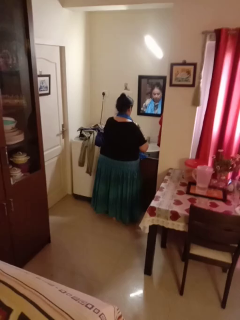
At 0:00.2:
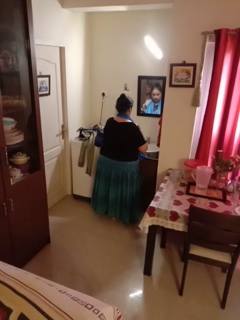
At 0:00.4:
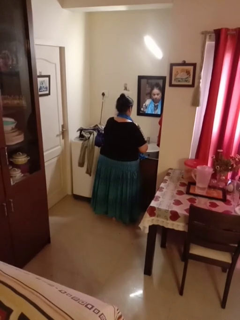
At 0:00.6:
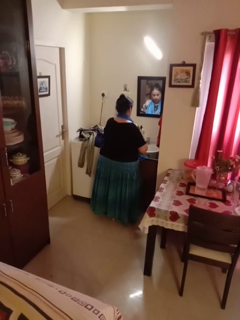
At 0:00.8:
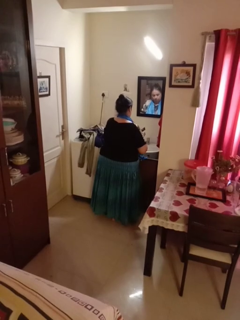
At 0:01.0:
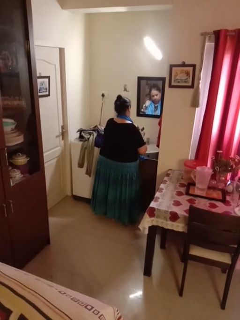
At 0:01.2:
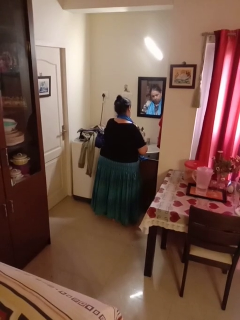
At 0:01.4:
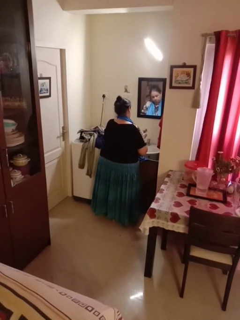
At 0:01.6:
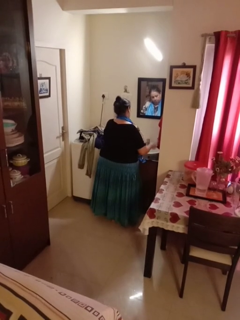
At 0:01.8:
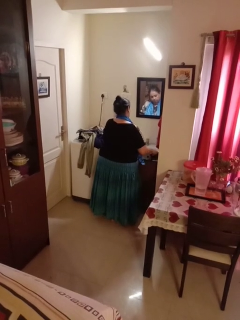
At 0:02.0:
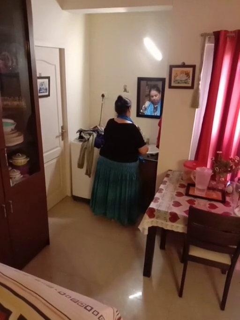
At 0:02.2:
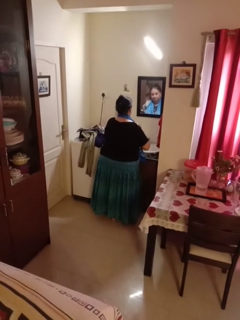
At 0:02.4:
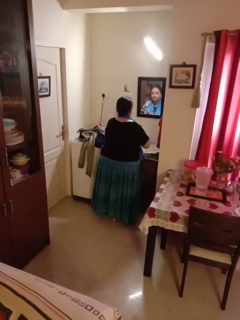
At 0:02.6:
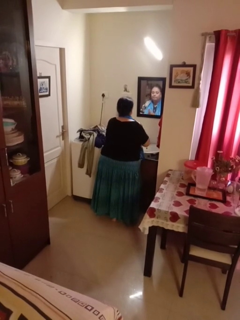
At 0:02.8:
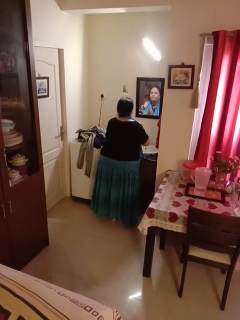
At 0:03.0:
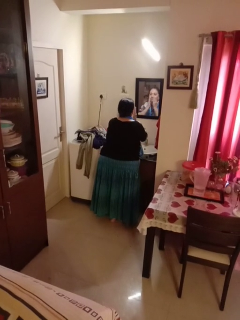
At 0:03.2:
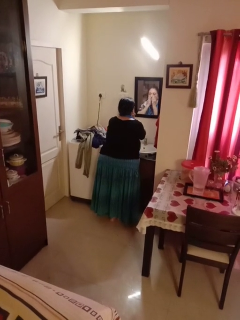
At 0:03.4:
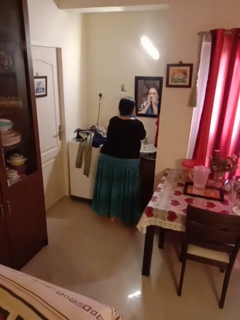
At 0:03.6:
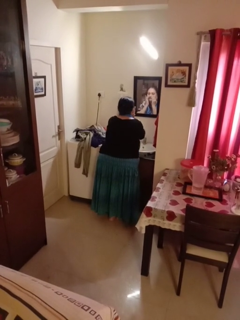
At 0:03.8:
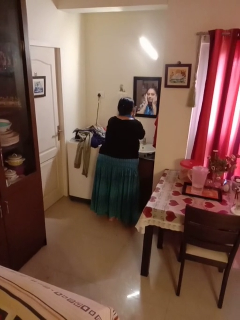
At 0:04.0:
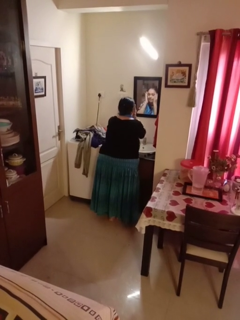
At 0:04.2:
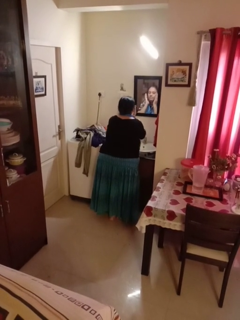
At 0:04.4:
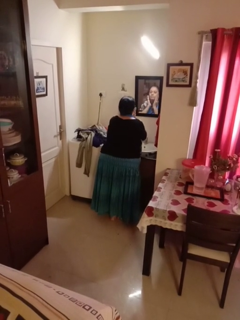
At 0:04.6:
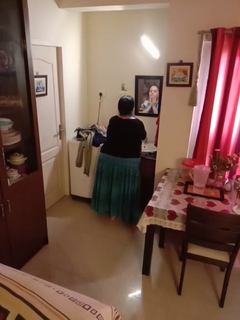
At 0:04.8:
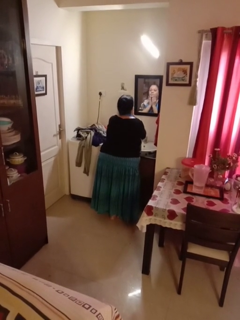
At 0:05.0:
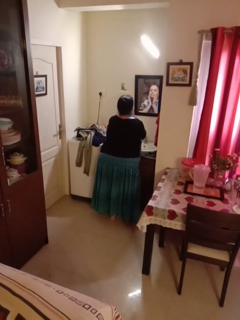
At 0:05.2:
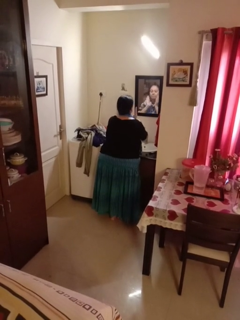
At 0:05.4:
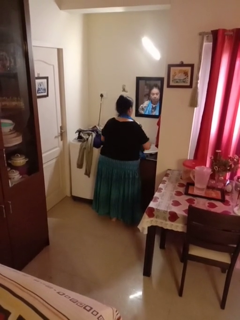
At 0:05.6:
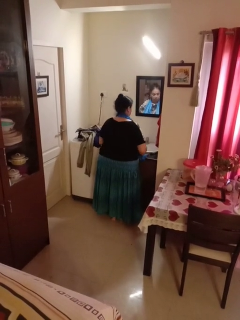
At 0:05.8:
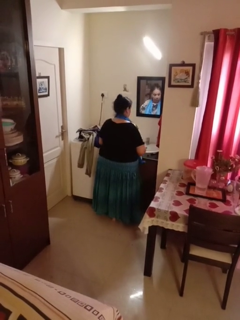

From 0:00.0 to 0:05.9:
person applies foundation makeup

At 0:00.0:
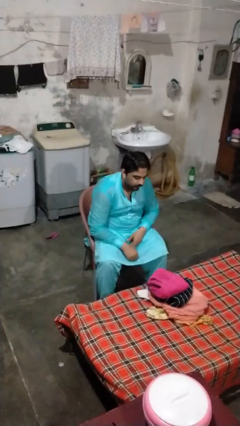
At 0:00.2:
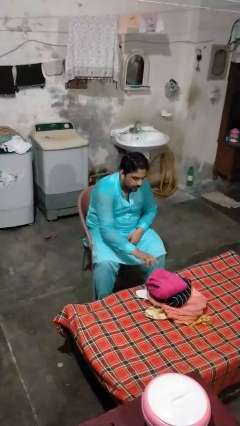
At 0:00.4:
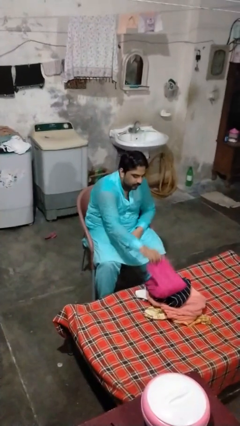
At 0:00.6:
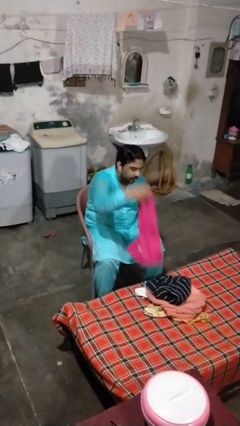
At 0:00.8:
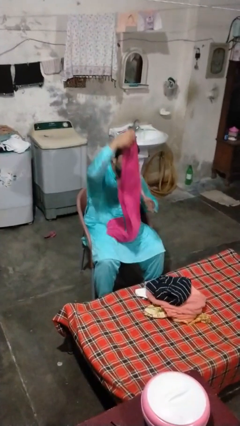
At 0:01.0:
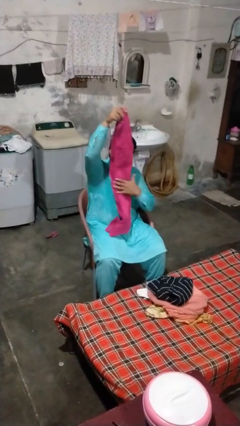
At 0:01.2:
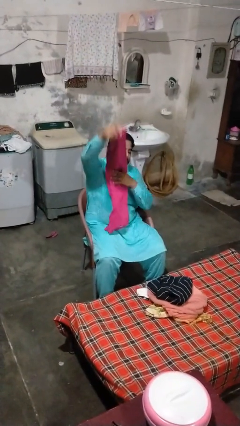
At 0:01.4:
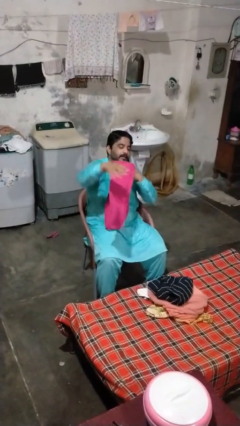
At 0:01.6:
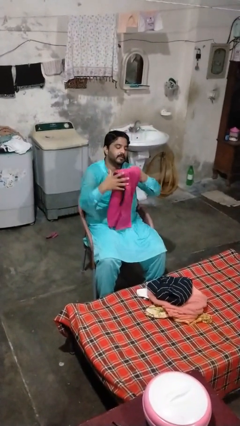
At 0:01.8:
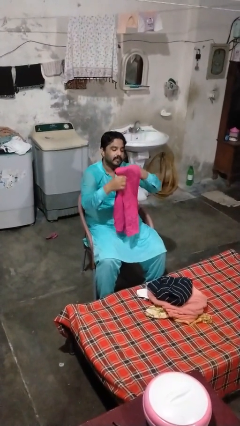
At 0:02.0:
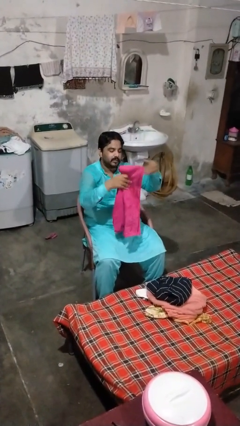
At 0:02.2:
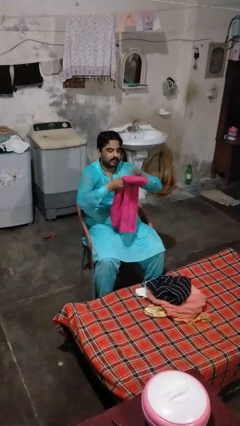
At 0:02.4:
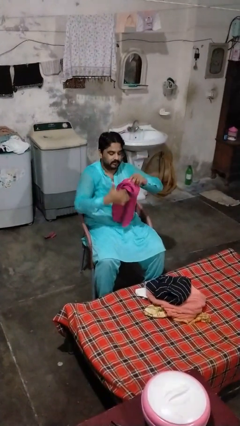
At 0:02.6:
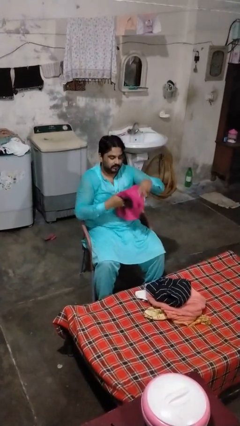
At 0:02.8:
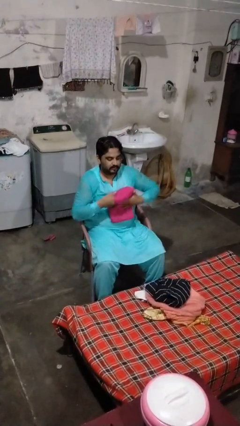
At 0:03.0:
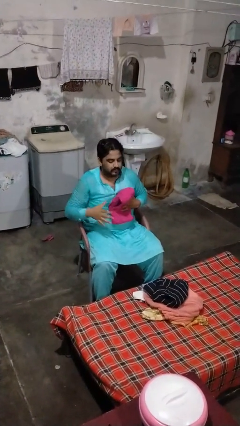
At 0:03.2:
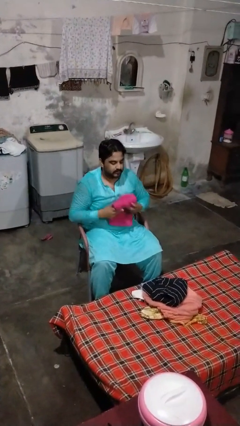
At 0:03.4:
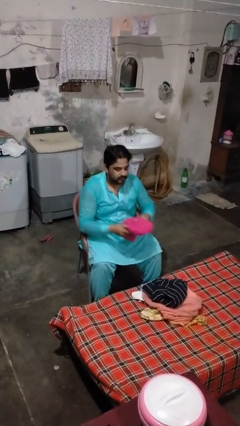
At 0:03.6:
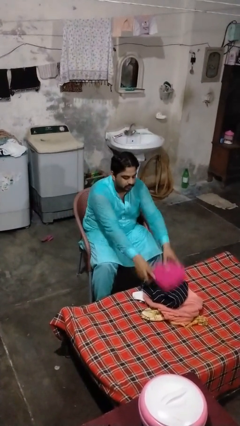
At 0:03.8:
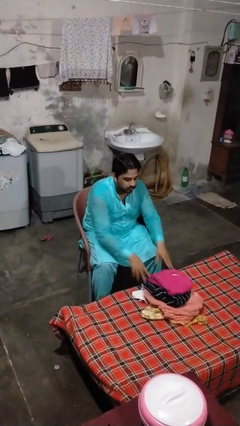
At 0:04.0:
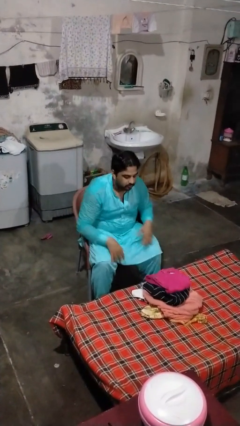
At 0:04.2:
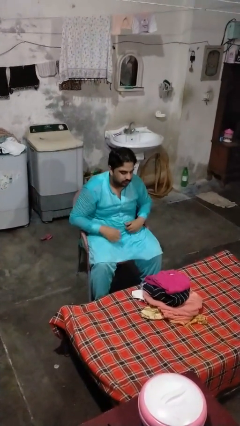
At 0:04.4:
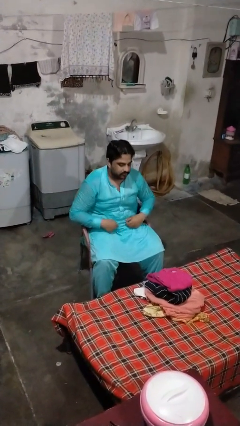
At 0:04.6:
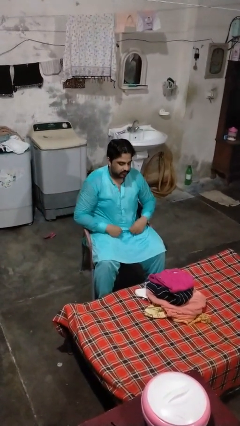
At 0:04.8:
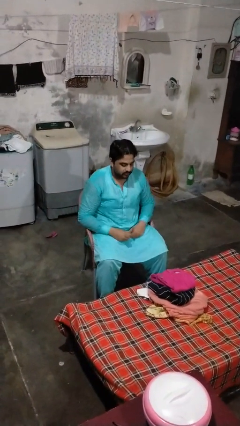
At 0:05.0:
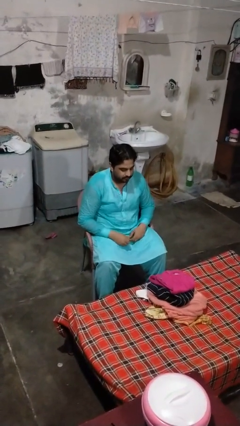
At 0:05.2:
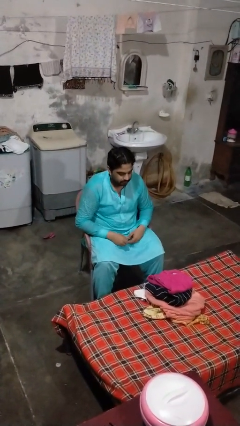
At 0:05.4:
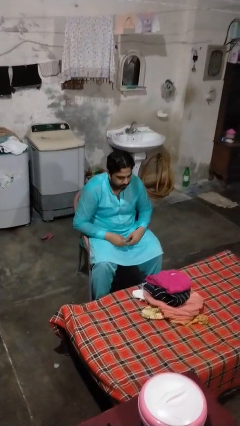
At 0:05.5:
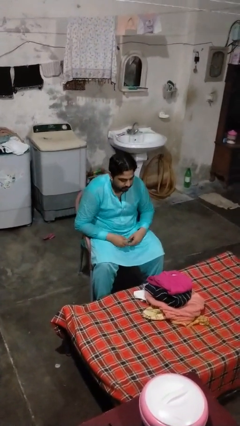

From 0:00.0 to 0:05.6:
person folds pants

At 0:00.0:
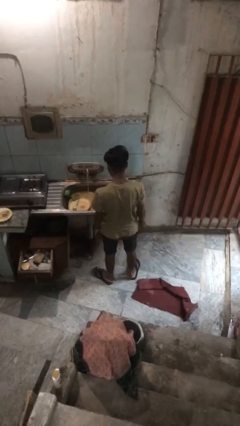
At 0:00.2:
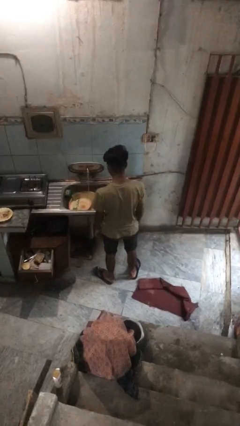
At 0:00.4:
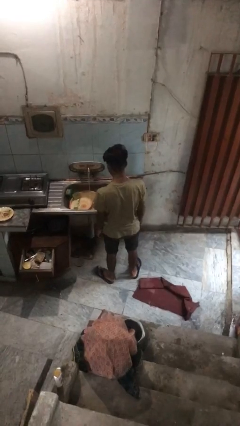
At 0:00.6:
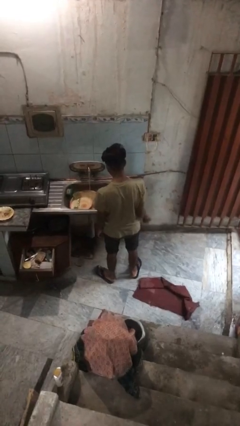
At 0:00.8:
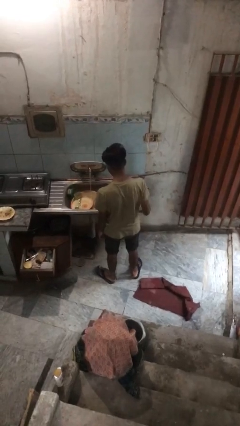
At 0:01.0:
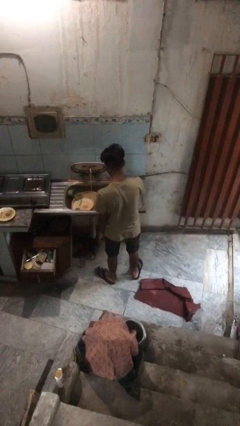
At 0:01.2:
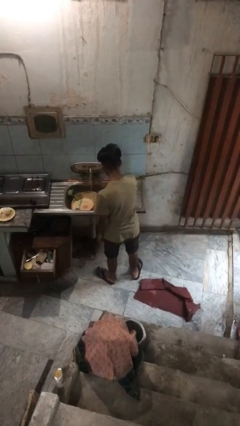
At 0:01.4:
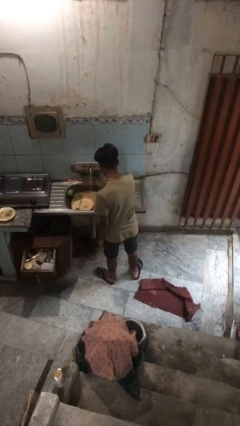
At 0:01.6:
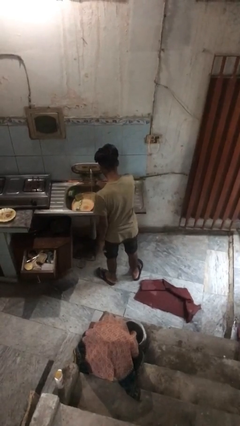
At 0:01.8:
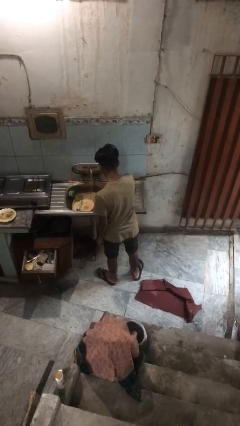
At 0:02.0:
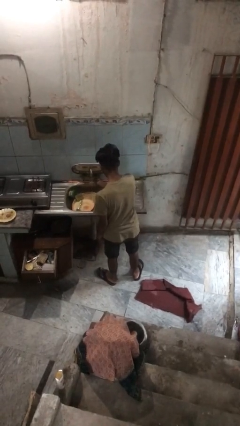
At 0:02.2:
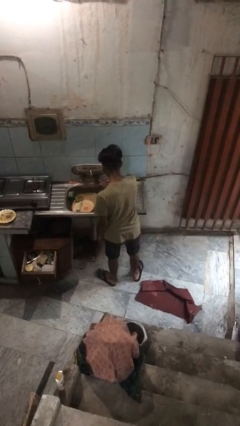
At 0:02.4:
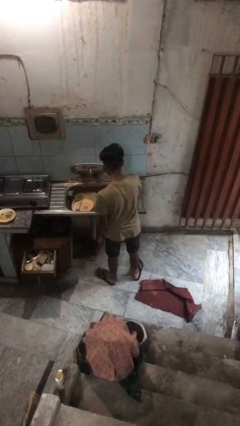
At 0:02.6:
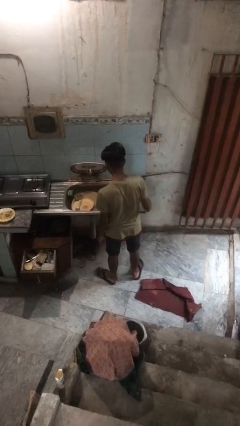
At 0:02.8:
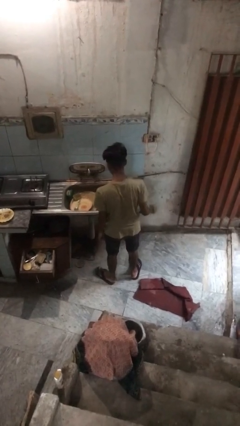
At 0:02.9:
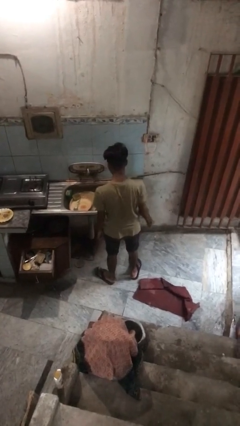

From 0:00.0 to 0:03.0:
person turns off faucet

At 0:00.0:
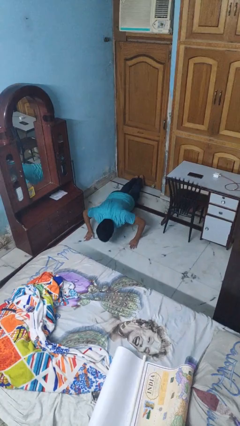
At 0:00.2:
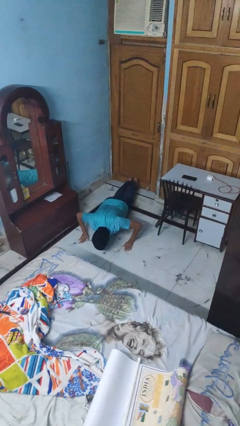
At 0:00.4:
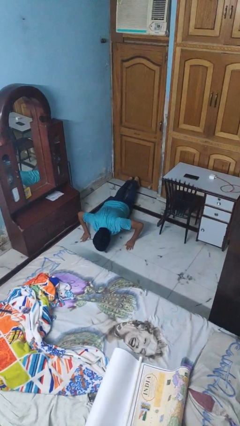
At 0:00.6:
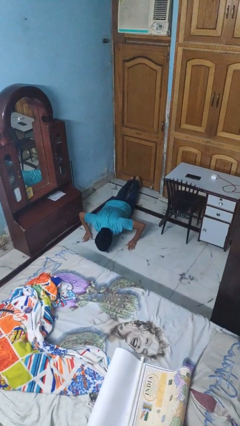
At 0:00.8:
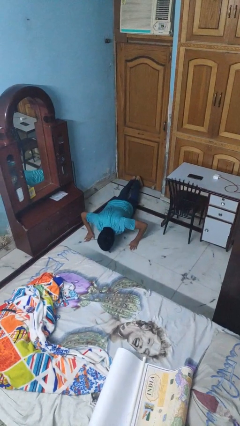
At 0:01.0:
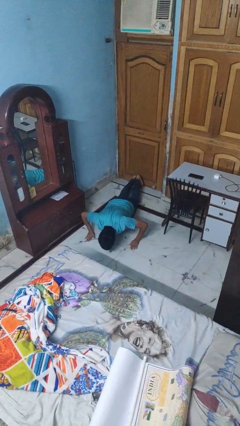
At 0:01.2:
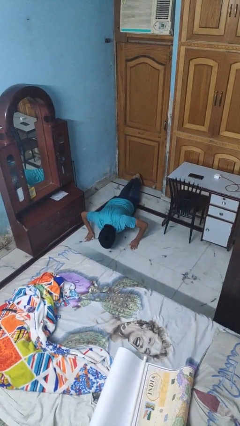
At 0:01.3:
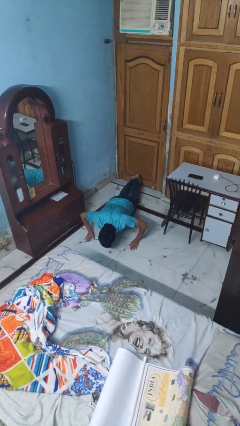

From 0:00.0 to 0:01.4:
person exercises with pushup

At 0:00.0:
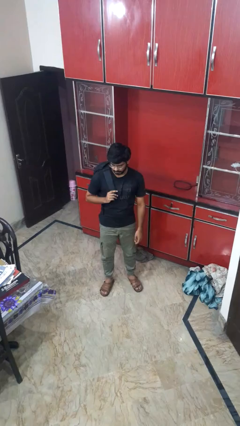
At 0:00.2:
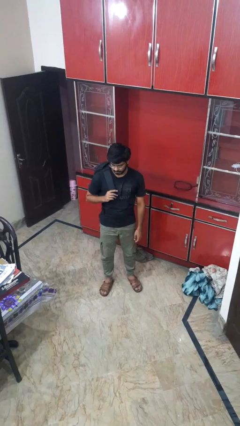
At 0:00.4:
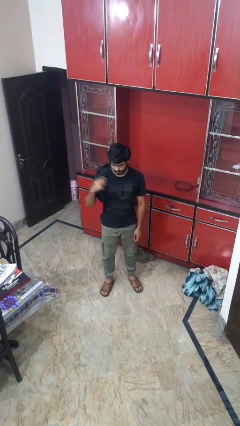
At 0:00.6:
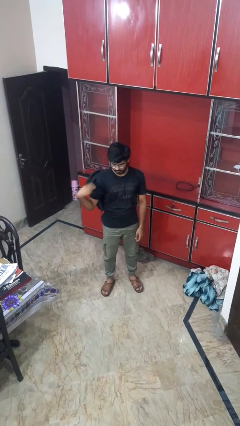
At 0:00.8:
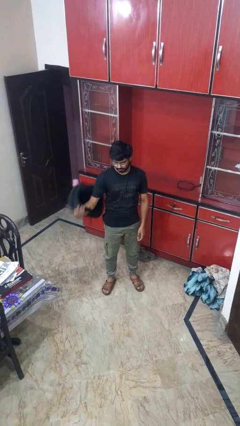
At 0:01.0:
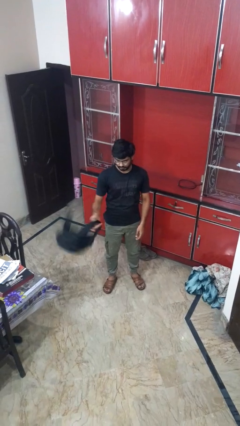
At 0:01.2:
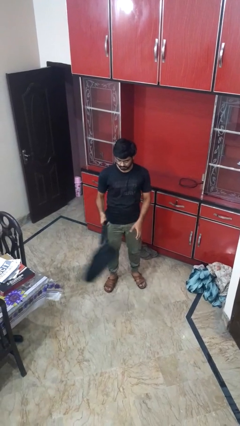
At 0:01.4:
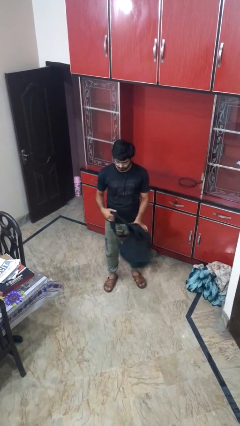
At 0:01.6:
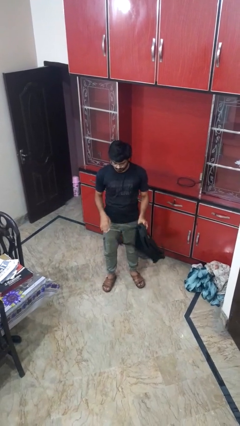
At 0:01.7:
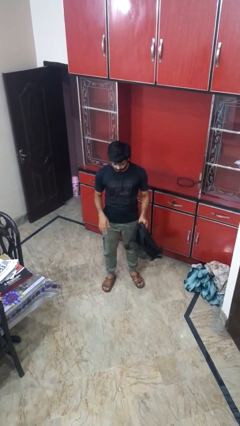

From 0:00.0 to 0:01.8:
person takes off backpack

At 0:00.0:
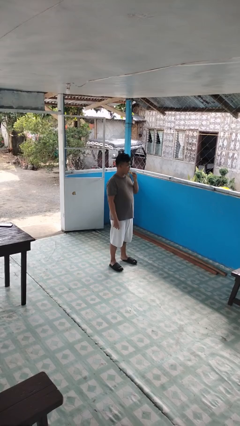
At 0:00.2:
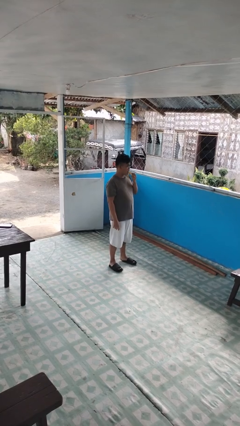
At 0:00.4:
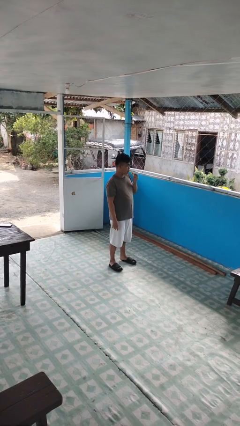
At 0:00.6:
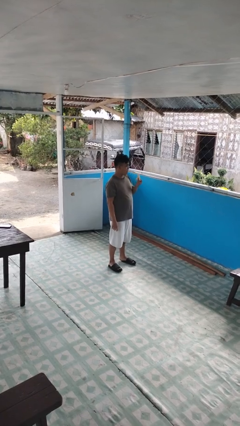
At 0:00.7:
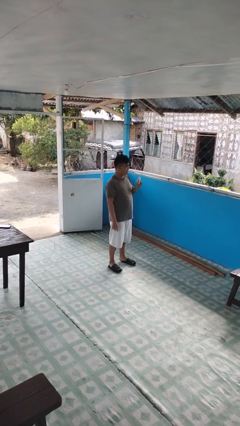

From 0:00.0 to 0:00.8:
person eats banana

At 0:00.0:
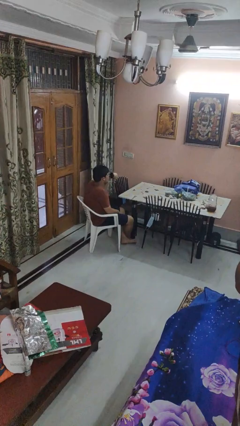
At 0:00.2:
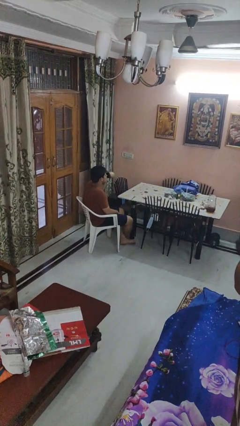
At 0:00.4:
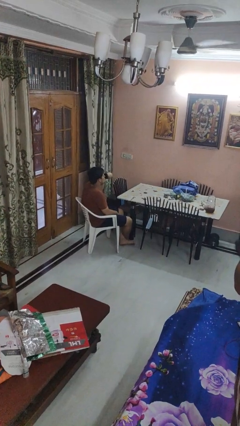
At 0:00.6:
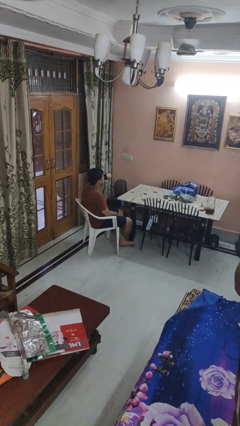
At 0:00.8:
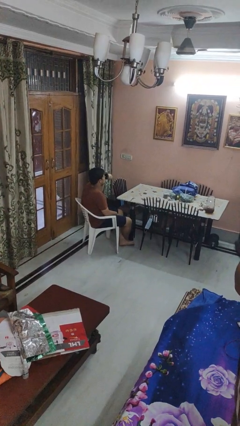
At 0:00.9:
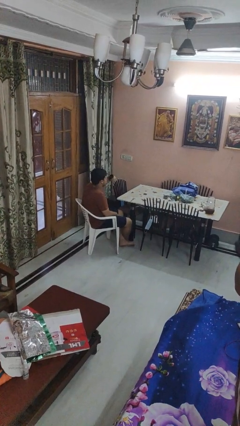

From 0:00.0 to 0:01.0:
person drinks from mug
